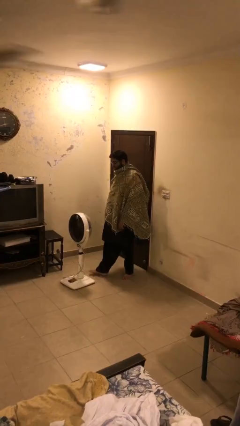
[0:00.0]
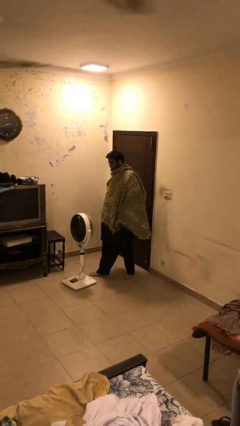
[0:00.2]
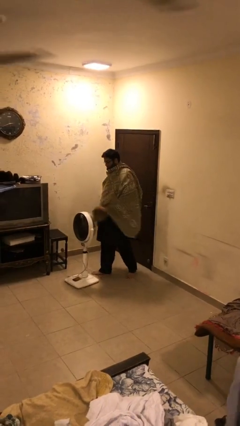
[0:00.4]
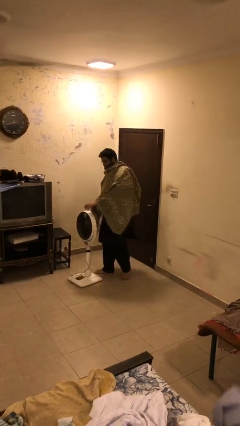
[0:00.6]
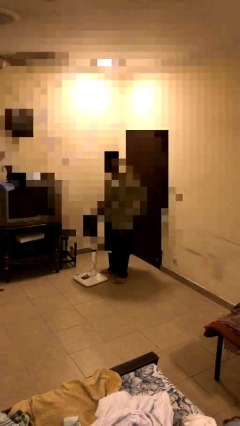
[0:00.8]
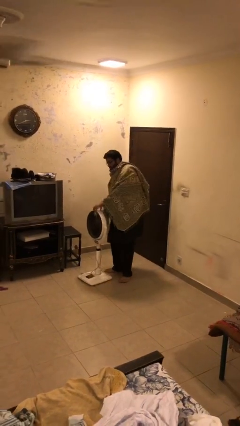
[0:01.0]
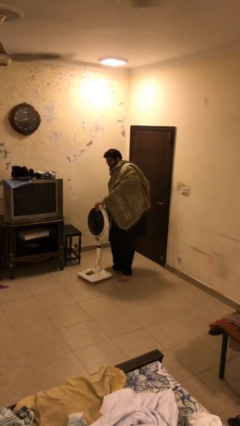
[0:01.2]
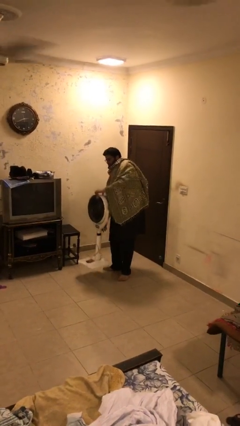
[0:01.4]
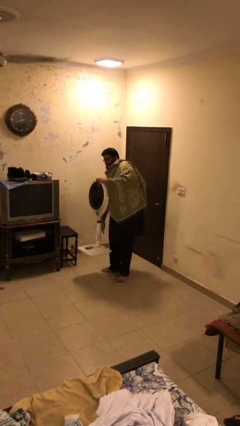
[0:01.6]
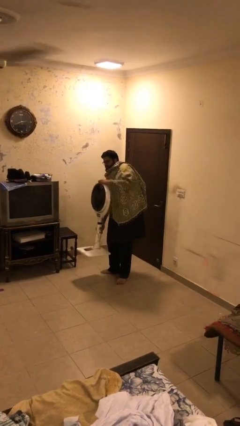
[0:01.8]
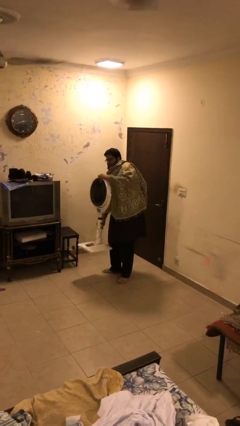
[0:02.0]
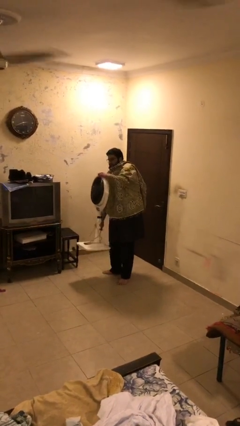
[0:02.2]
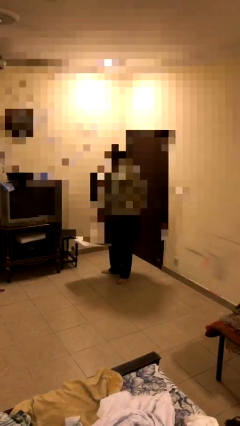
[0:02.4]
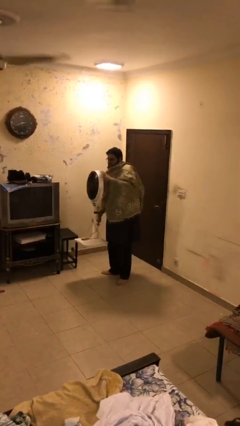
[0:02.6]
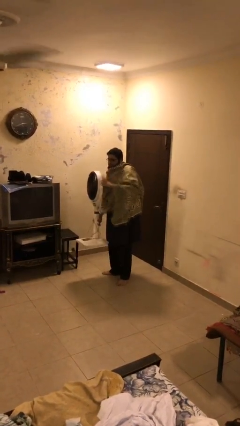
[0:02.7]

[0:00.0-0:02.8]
person picks up object from floor

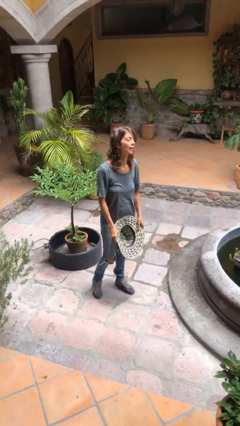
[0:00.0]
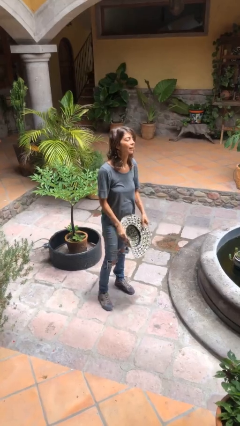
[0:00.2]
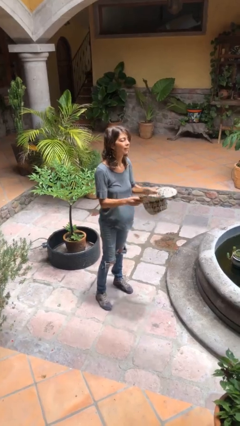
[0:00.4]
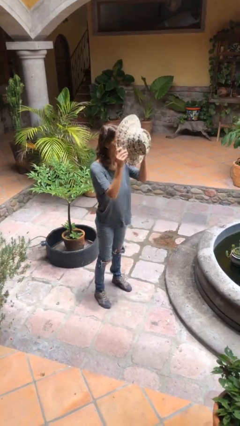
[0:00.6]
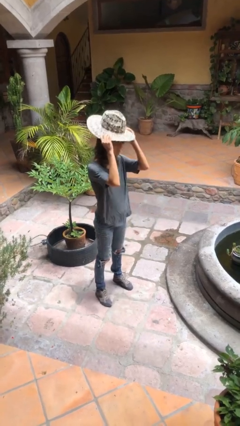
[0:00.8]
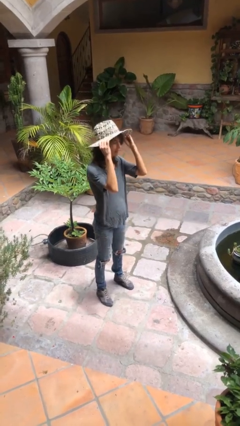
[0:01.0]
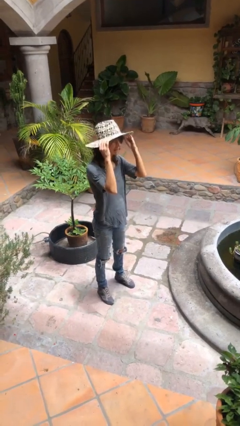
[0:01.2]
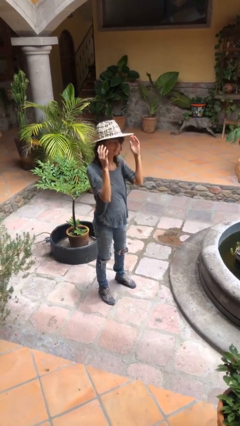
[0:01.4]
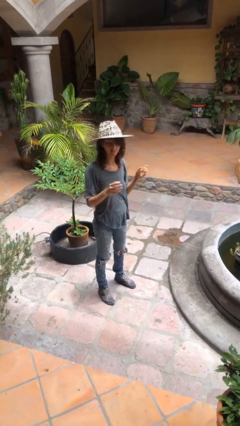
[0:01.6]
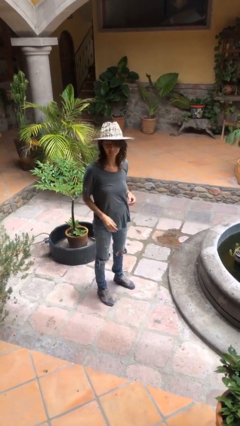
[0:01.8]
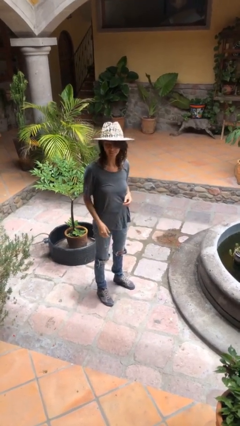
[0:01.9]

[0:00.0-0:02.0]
person puts on hat

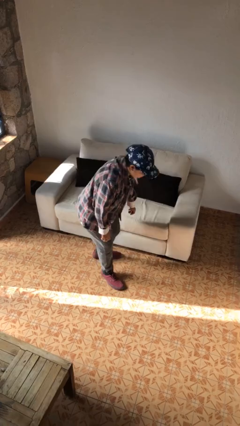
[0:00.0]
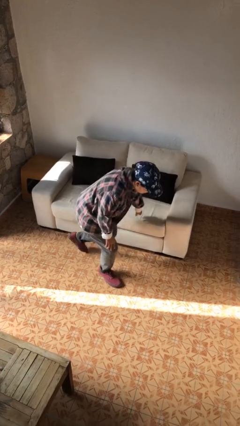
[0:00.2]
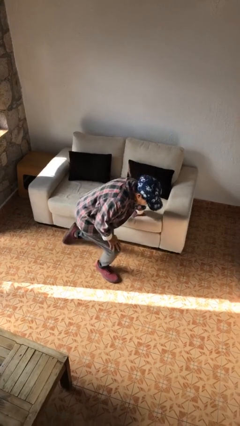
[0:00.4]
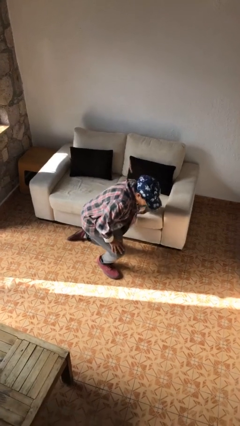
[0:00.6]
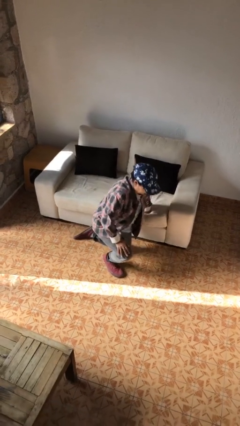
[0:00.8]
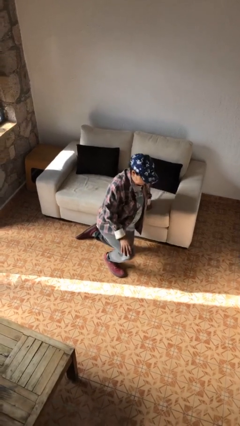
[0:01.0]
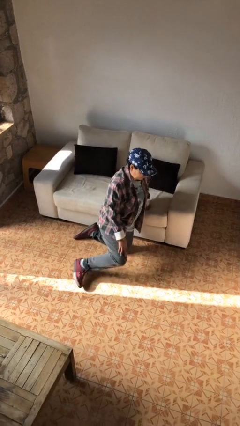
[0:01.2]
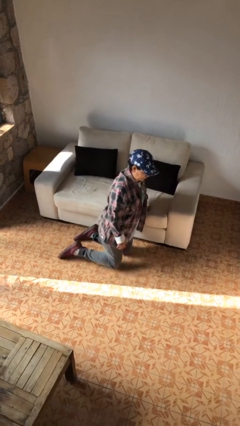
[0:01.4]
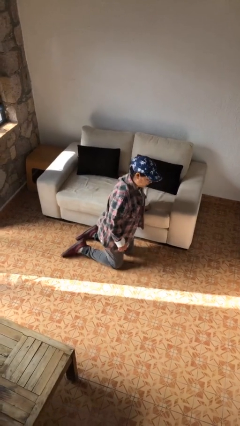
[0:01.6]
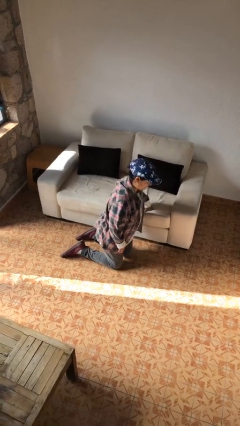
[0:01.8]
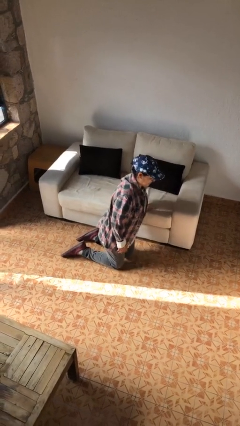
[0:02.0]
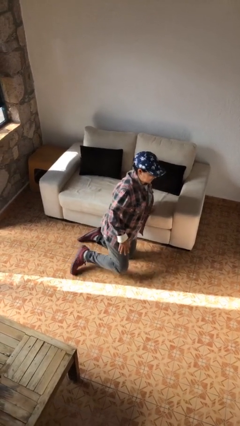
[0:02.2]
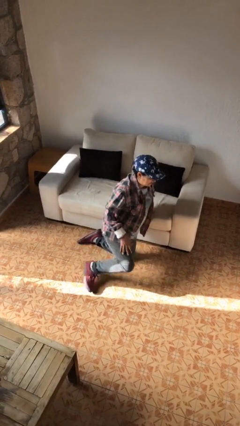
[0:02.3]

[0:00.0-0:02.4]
person kneels

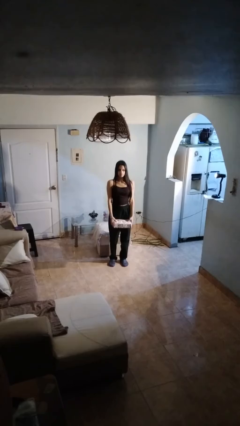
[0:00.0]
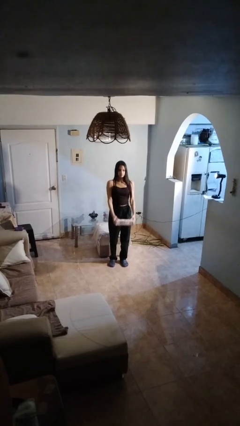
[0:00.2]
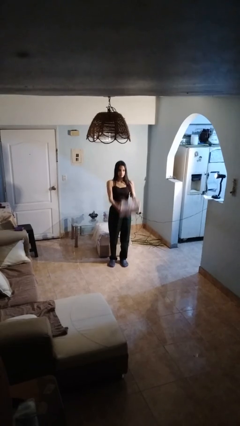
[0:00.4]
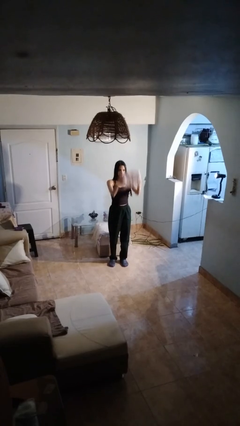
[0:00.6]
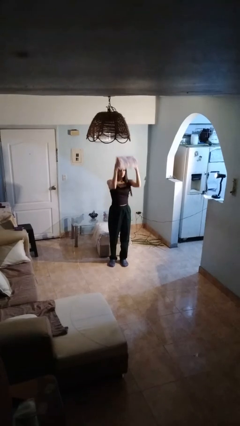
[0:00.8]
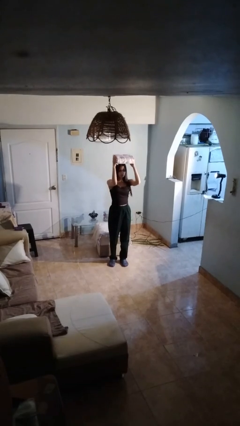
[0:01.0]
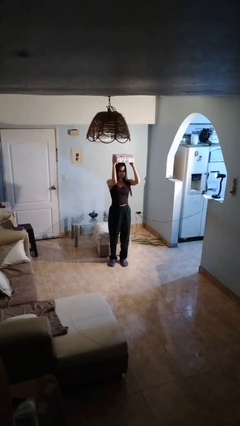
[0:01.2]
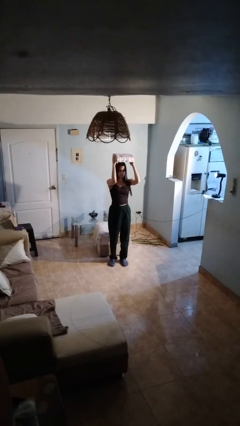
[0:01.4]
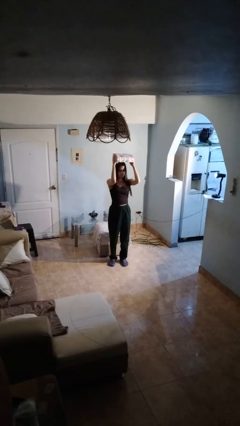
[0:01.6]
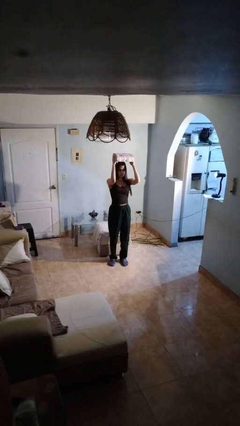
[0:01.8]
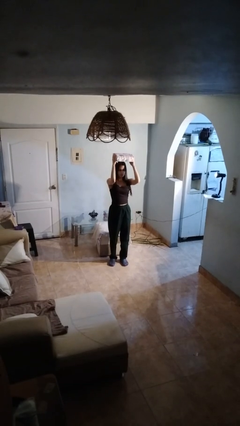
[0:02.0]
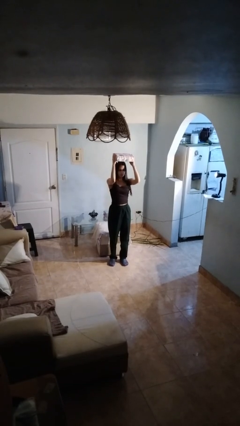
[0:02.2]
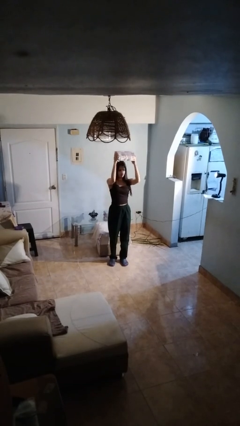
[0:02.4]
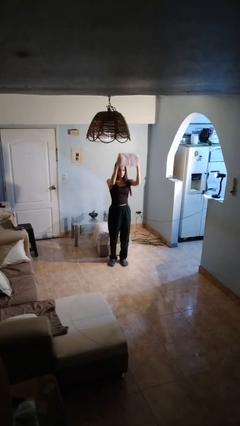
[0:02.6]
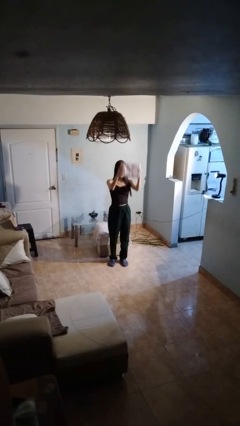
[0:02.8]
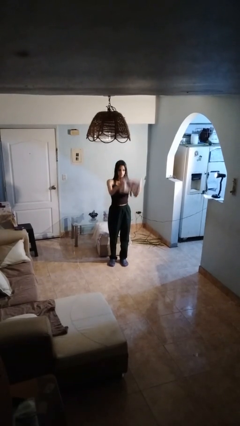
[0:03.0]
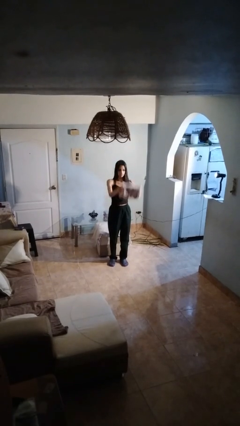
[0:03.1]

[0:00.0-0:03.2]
person holds object above head

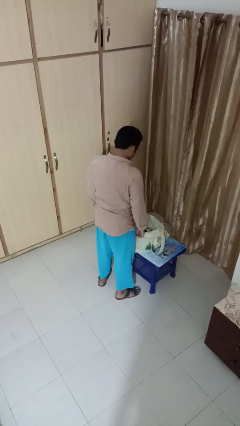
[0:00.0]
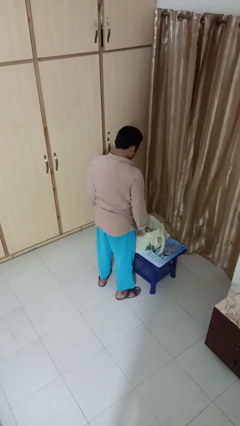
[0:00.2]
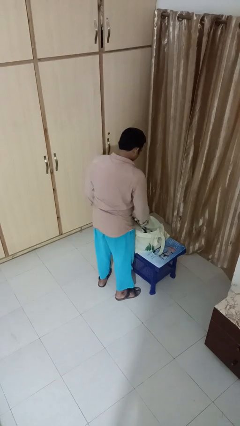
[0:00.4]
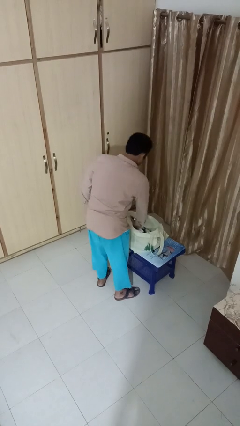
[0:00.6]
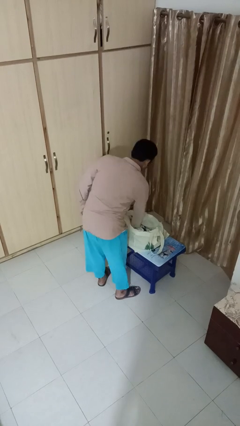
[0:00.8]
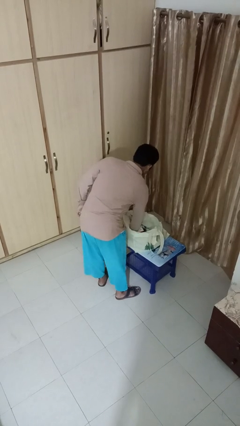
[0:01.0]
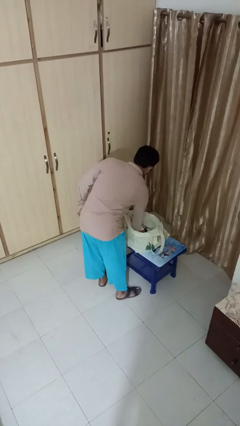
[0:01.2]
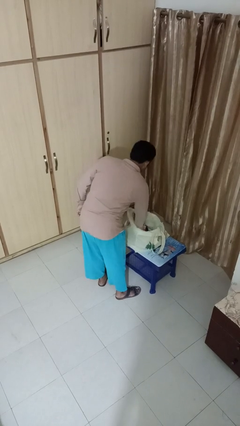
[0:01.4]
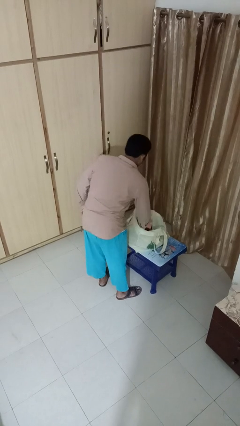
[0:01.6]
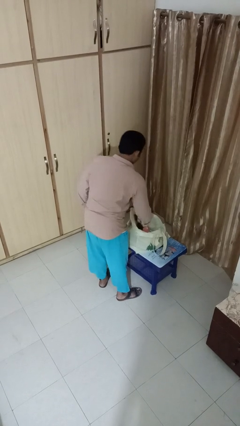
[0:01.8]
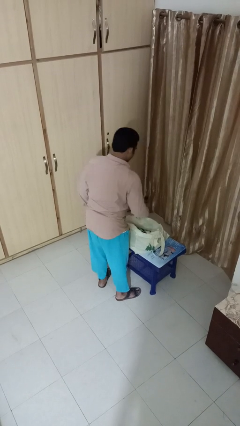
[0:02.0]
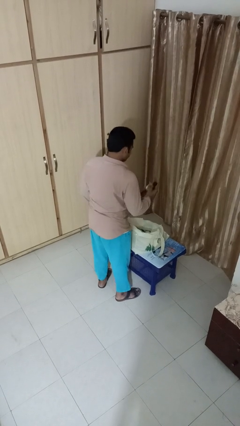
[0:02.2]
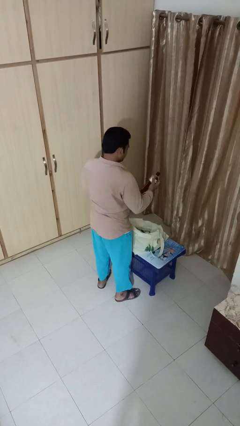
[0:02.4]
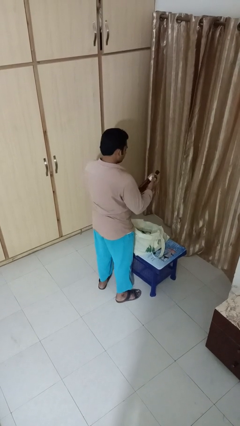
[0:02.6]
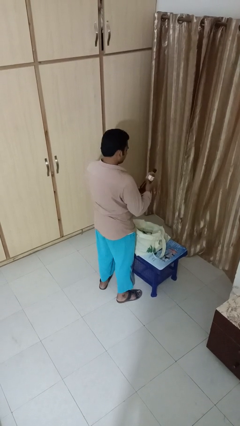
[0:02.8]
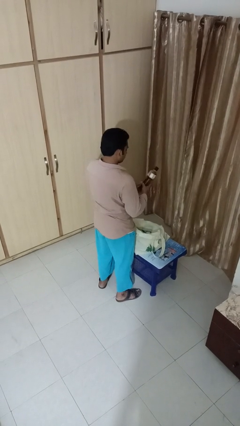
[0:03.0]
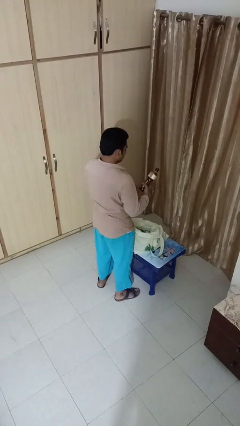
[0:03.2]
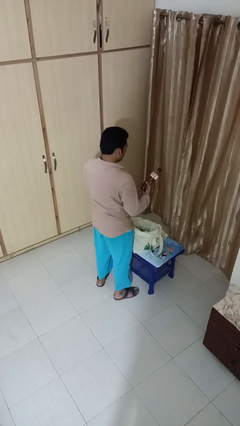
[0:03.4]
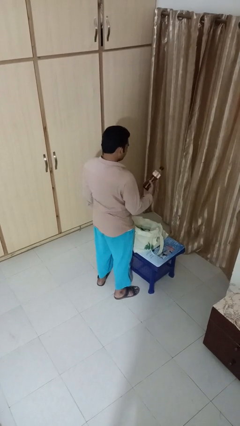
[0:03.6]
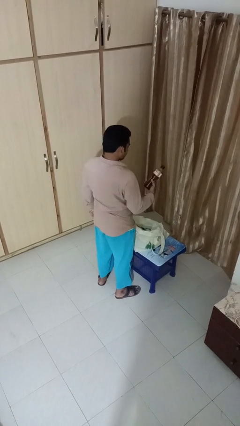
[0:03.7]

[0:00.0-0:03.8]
person takes object from bag

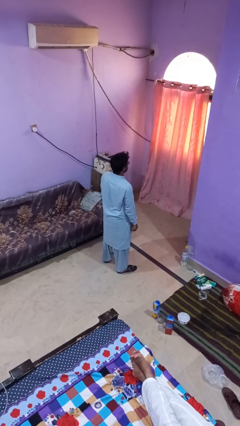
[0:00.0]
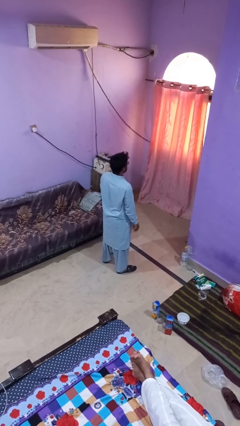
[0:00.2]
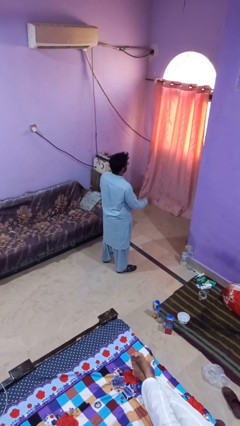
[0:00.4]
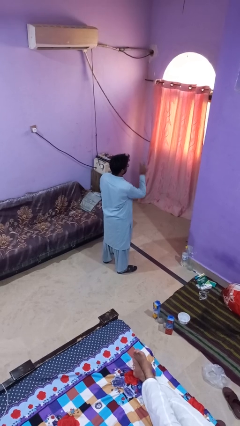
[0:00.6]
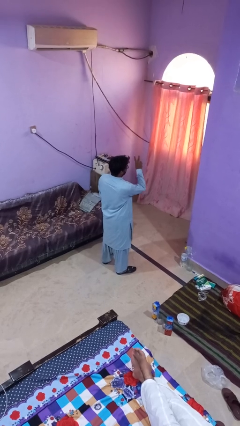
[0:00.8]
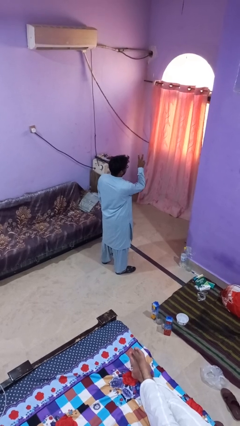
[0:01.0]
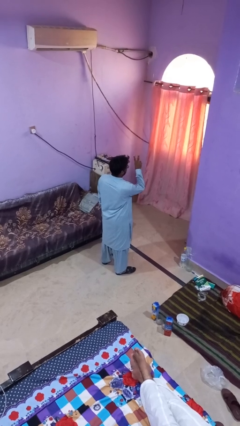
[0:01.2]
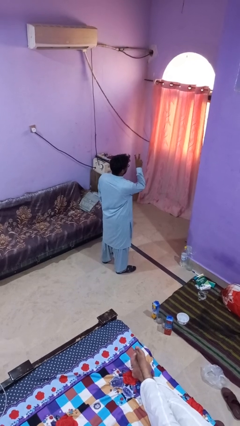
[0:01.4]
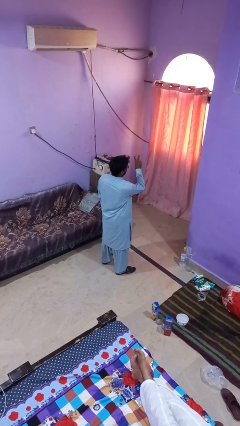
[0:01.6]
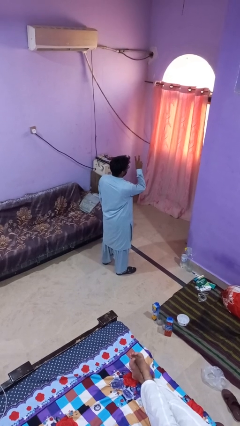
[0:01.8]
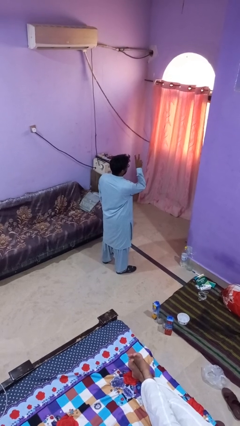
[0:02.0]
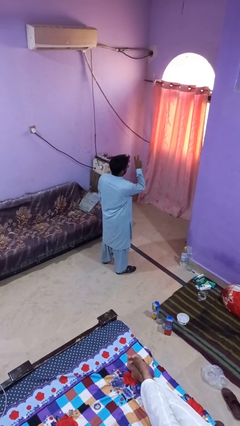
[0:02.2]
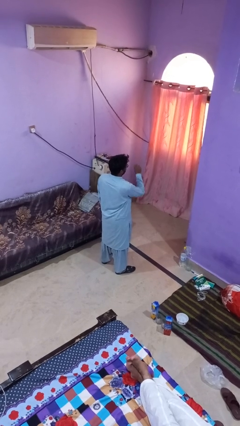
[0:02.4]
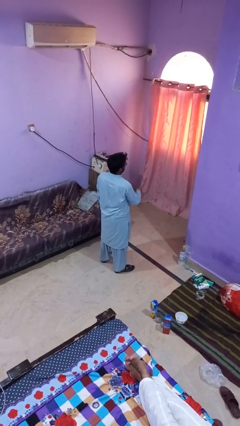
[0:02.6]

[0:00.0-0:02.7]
person gestures peace

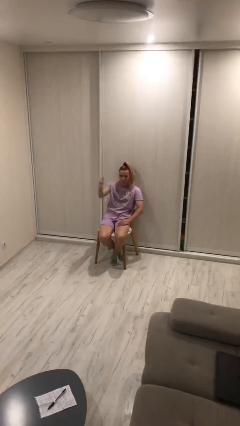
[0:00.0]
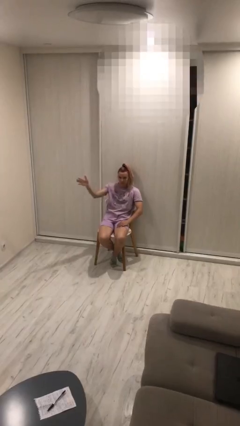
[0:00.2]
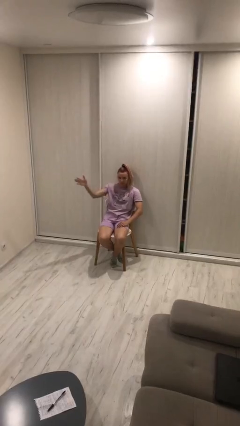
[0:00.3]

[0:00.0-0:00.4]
person gestures swipe right
